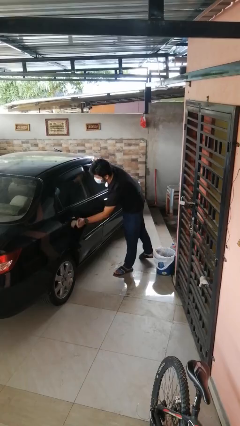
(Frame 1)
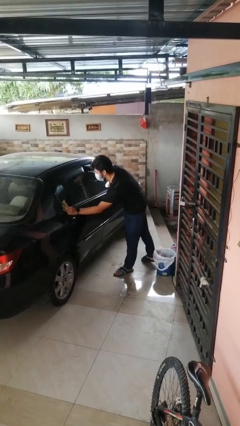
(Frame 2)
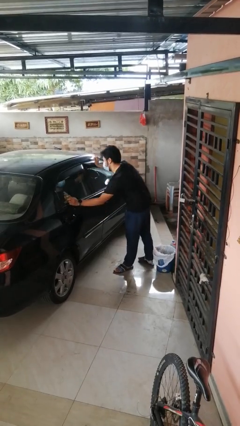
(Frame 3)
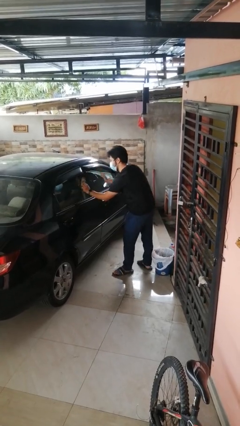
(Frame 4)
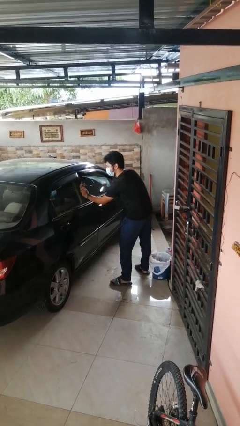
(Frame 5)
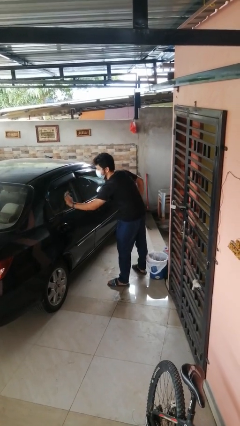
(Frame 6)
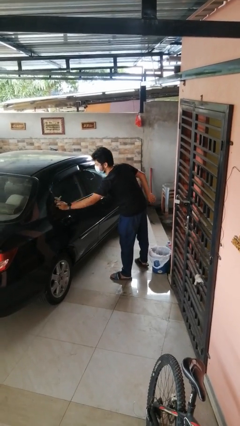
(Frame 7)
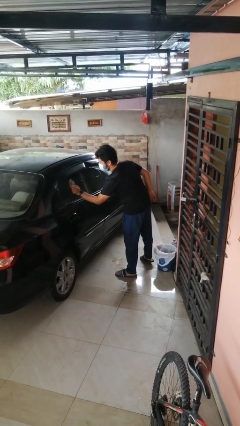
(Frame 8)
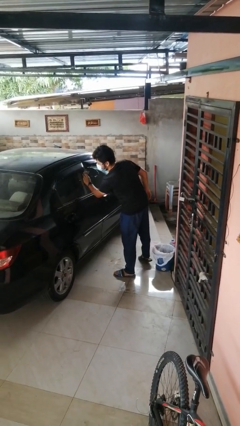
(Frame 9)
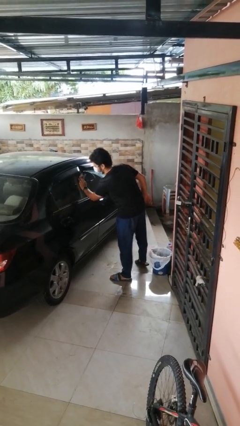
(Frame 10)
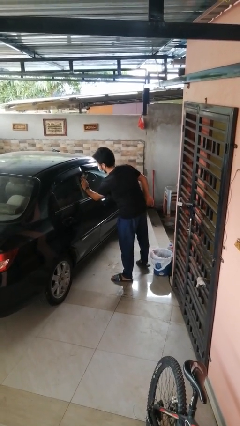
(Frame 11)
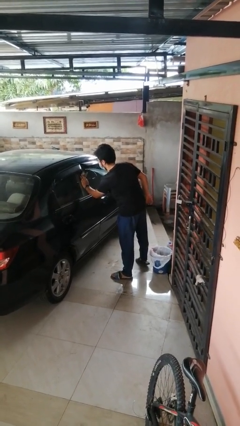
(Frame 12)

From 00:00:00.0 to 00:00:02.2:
person polishes car with rag

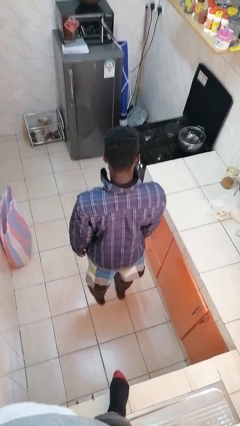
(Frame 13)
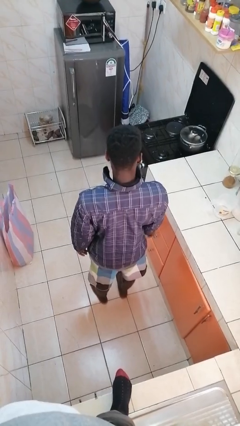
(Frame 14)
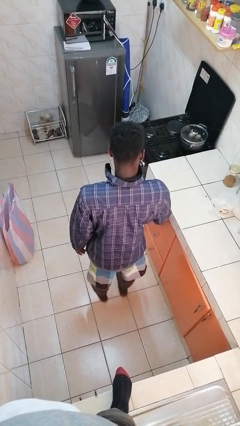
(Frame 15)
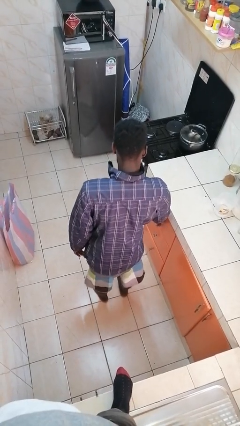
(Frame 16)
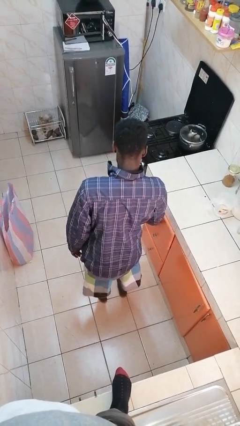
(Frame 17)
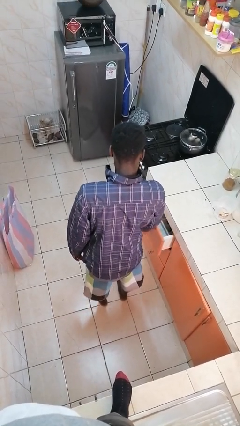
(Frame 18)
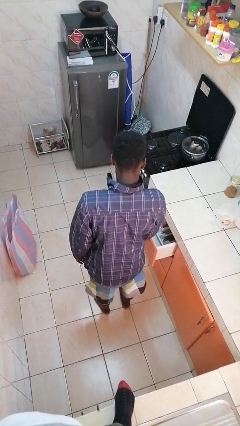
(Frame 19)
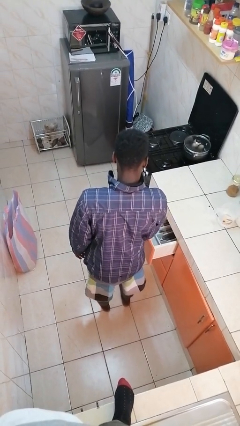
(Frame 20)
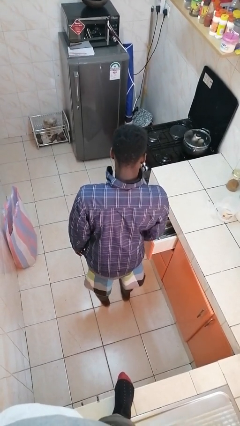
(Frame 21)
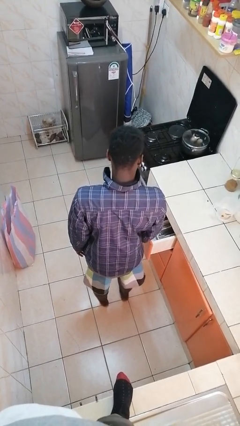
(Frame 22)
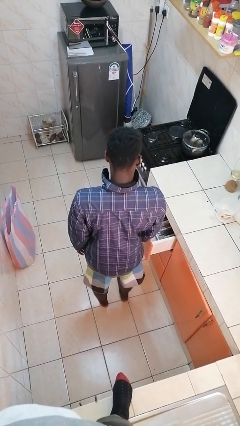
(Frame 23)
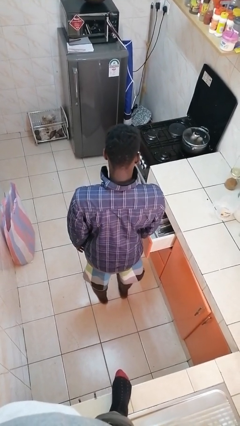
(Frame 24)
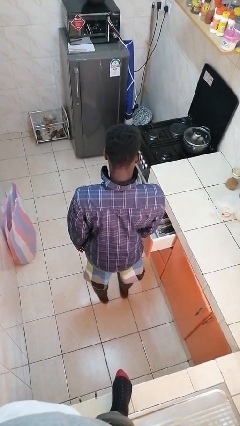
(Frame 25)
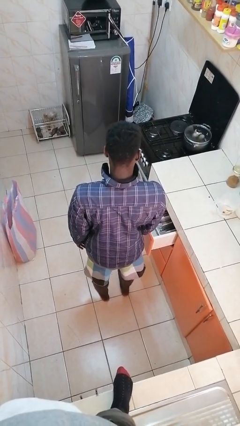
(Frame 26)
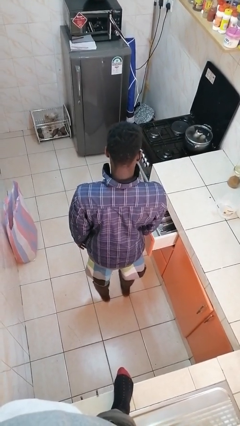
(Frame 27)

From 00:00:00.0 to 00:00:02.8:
person opens kitchen drawer

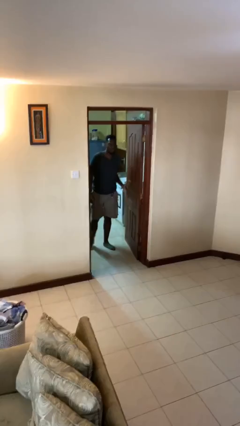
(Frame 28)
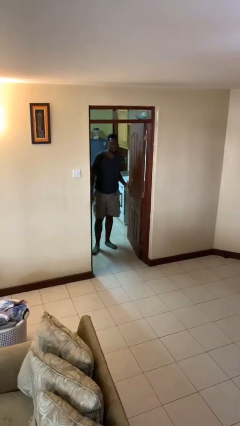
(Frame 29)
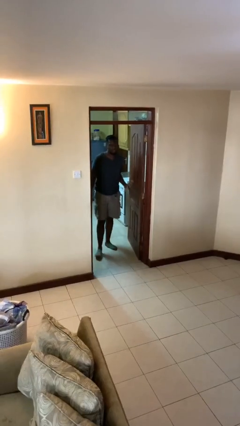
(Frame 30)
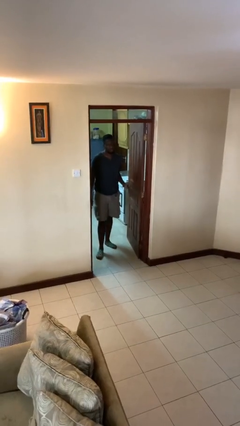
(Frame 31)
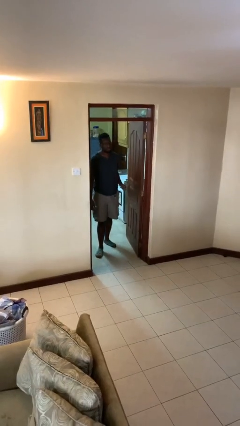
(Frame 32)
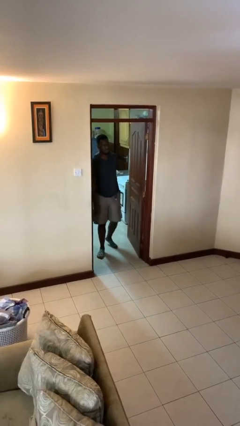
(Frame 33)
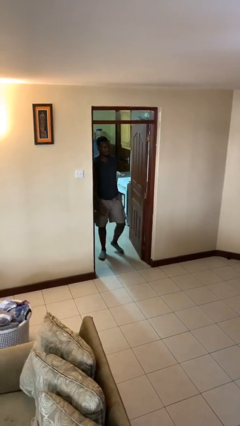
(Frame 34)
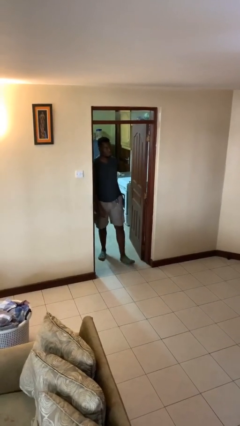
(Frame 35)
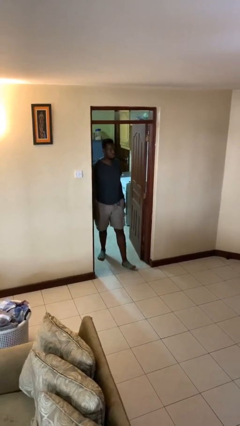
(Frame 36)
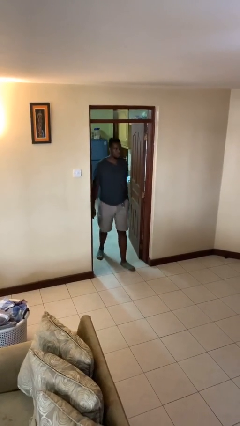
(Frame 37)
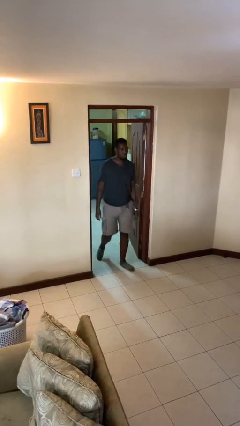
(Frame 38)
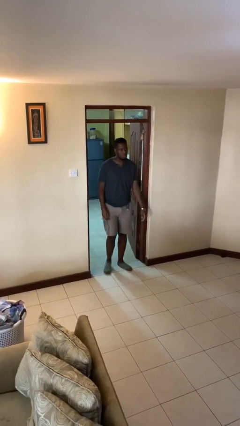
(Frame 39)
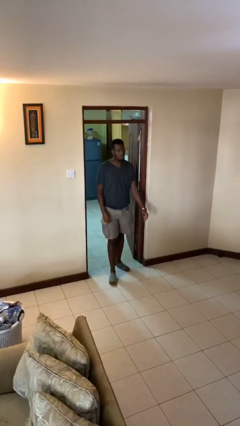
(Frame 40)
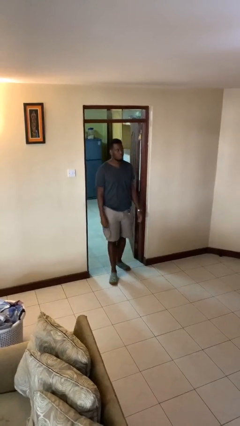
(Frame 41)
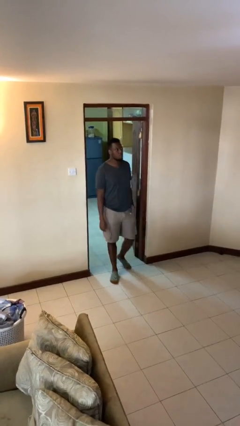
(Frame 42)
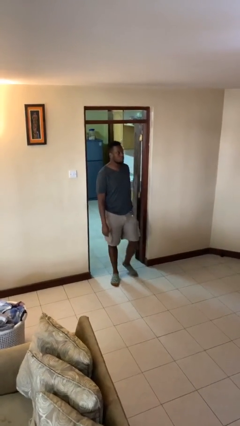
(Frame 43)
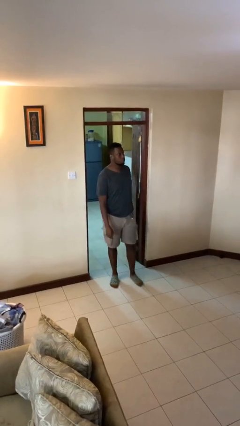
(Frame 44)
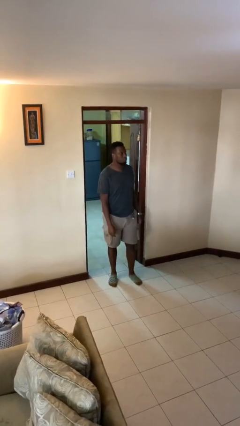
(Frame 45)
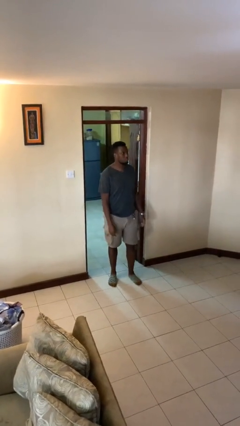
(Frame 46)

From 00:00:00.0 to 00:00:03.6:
person enters scene through structure

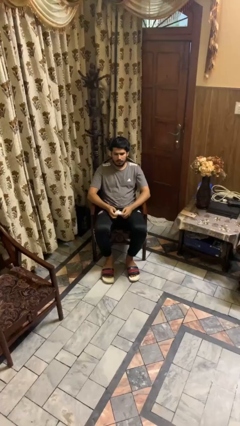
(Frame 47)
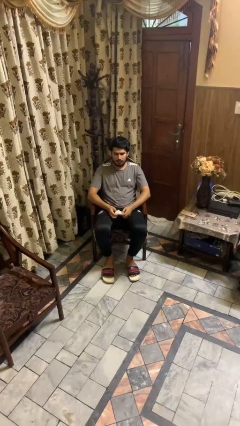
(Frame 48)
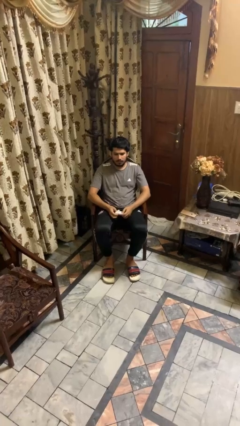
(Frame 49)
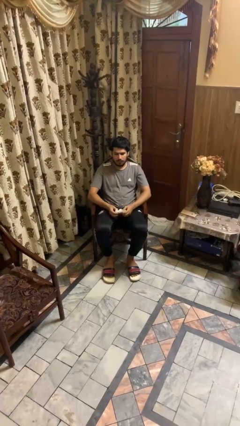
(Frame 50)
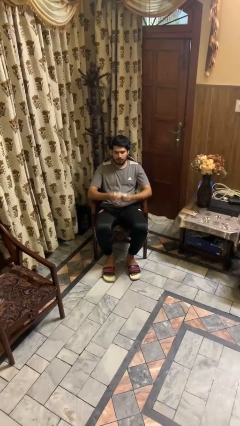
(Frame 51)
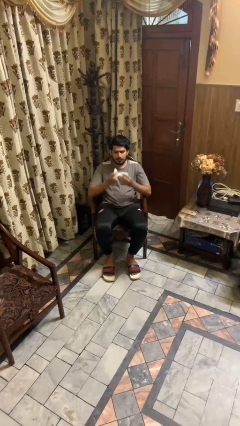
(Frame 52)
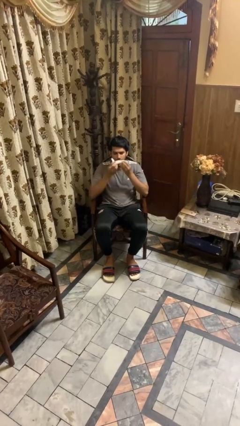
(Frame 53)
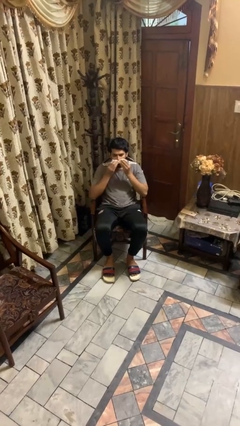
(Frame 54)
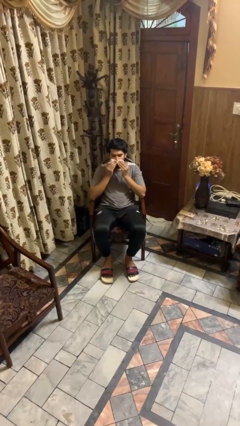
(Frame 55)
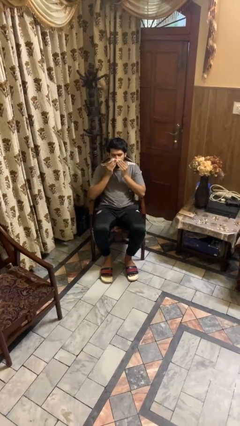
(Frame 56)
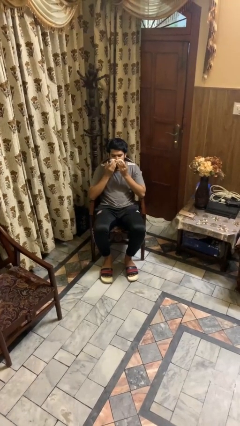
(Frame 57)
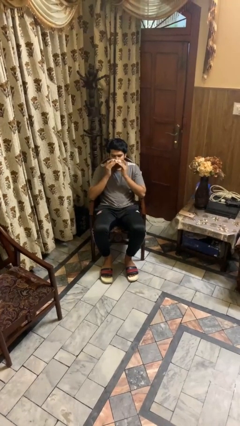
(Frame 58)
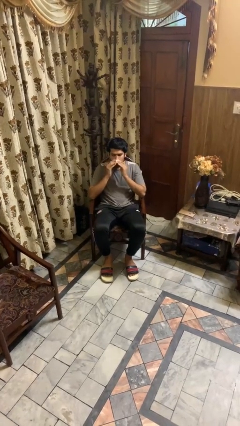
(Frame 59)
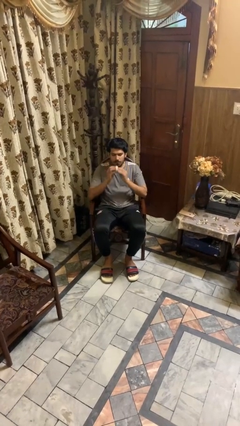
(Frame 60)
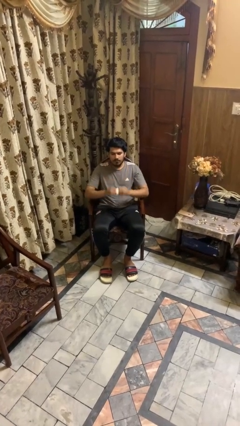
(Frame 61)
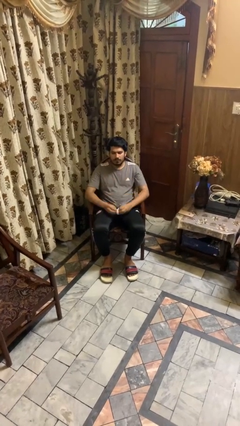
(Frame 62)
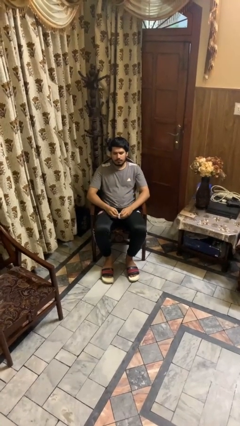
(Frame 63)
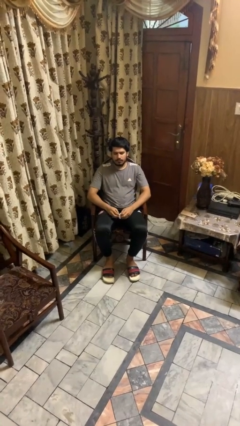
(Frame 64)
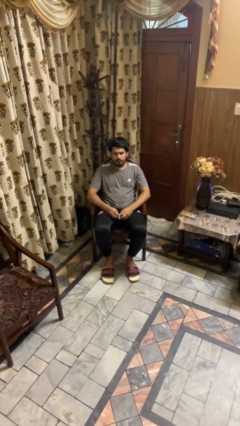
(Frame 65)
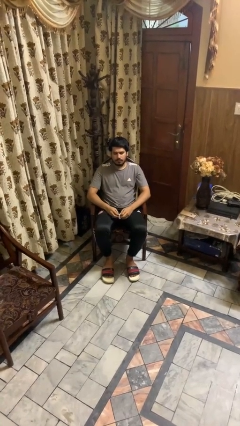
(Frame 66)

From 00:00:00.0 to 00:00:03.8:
person blows nose

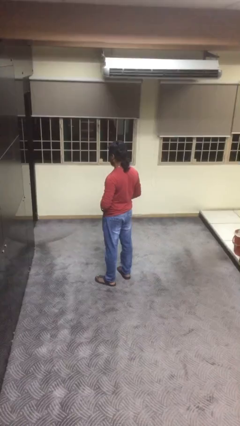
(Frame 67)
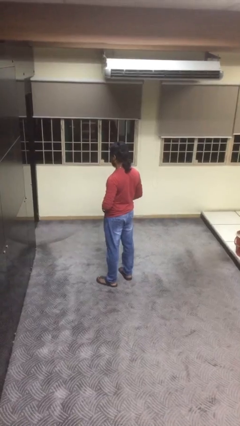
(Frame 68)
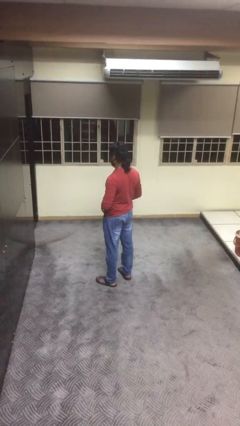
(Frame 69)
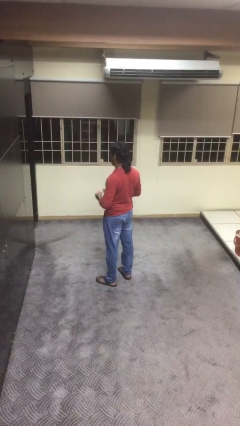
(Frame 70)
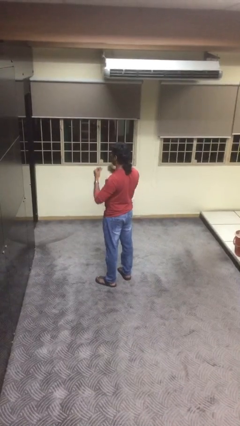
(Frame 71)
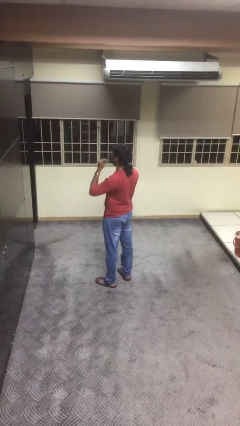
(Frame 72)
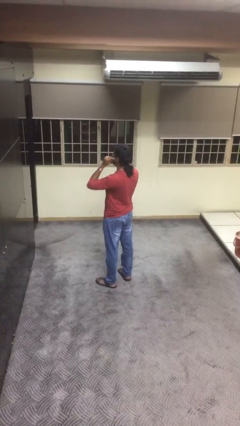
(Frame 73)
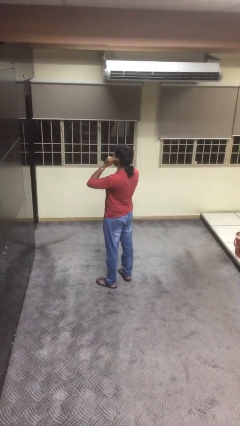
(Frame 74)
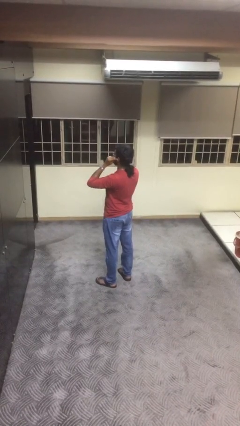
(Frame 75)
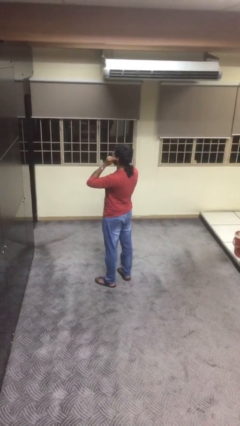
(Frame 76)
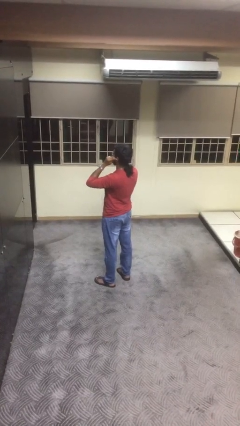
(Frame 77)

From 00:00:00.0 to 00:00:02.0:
person puts on headphones

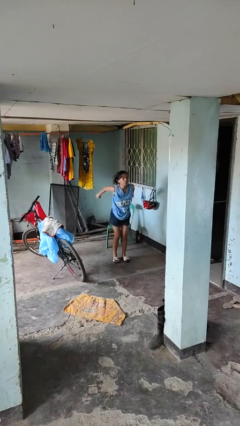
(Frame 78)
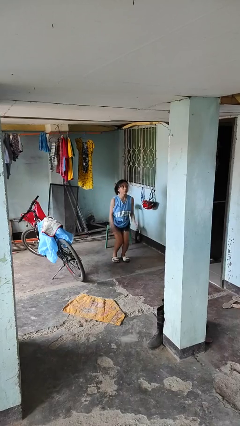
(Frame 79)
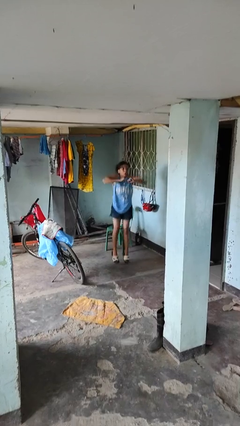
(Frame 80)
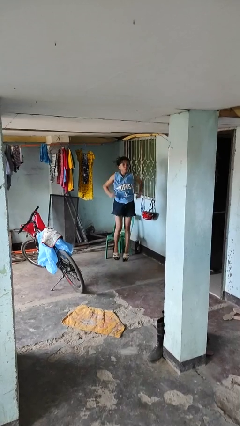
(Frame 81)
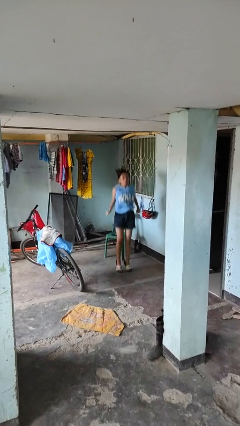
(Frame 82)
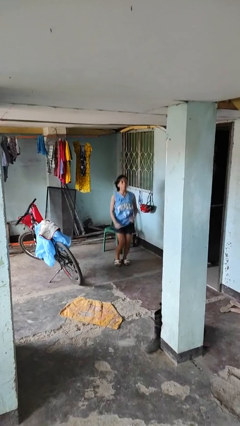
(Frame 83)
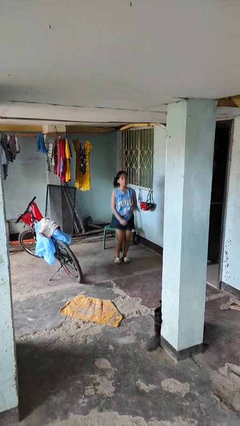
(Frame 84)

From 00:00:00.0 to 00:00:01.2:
person jumps

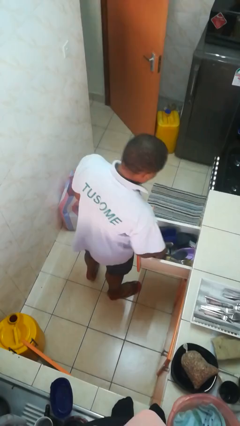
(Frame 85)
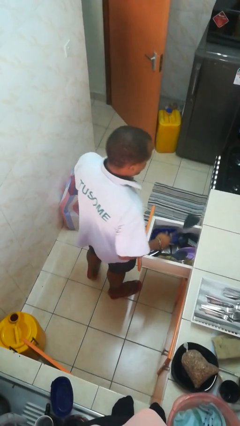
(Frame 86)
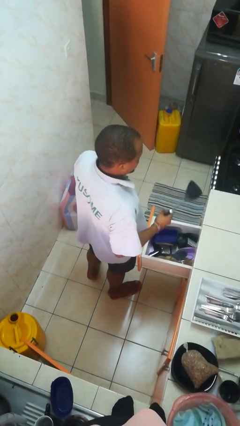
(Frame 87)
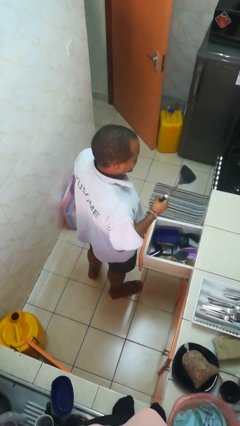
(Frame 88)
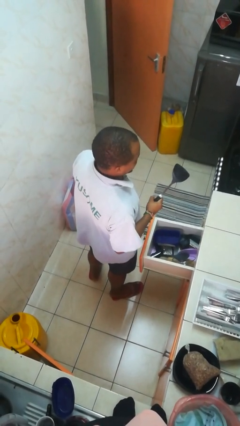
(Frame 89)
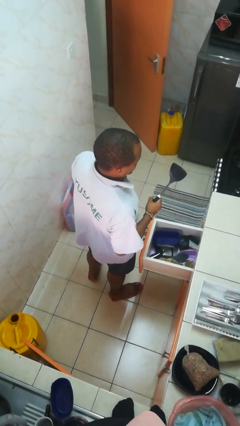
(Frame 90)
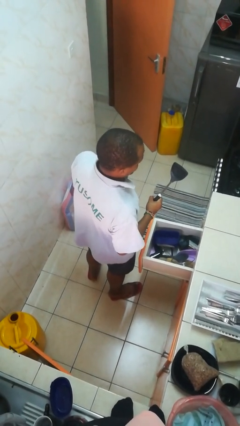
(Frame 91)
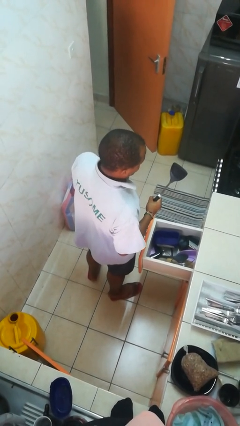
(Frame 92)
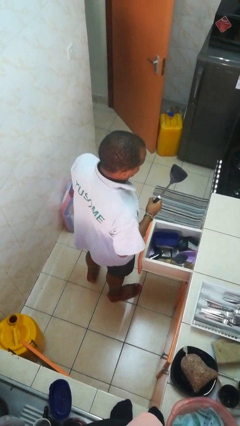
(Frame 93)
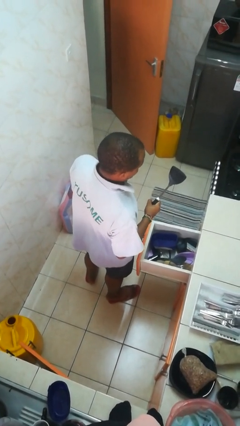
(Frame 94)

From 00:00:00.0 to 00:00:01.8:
person takes object from kitchen drawer
